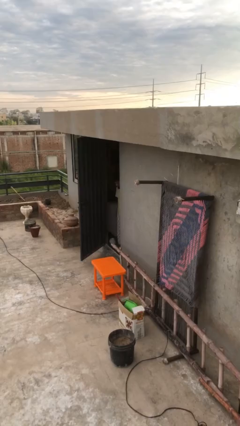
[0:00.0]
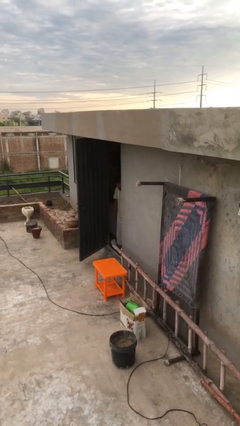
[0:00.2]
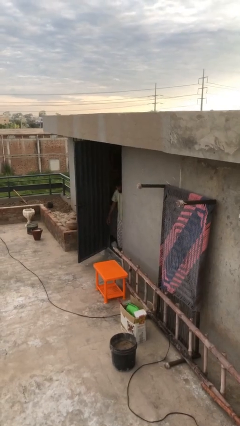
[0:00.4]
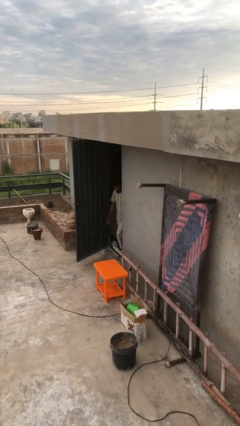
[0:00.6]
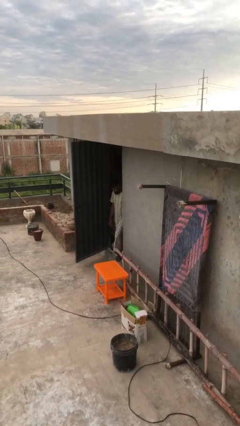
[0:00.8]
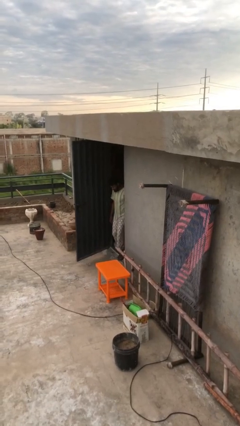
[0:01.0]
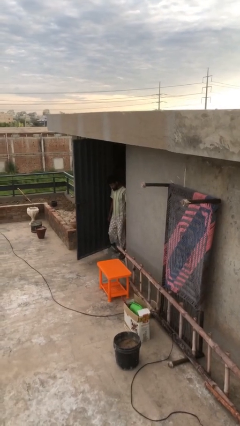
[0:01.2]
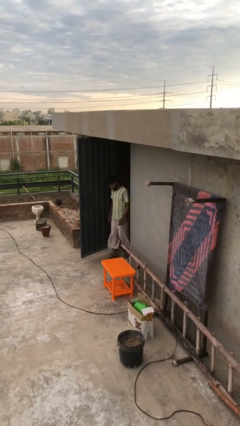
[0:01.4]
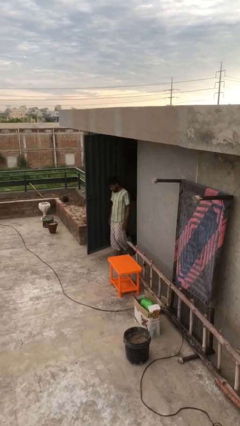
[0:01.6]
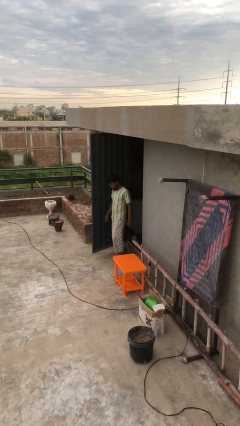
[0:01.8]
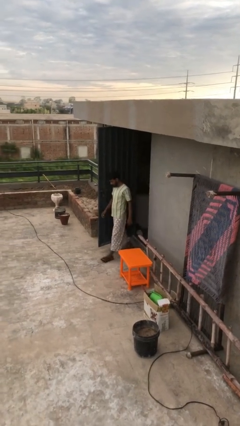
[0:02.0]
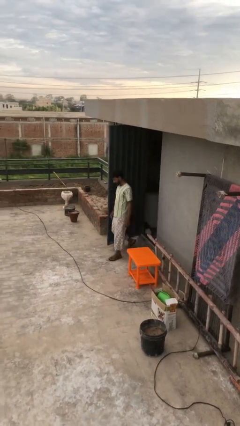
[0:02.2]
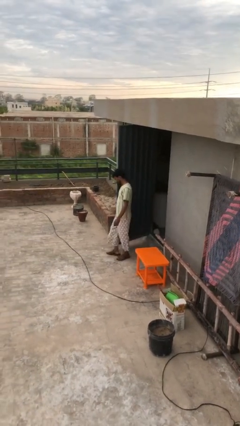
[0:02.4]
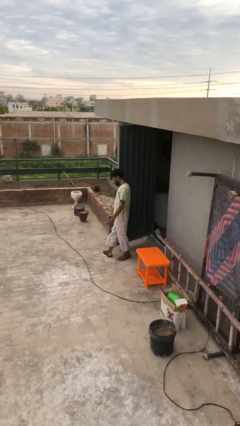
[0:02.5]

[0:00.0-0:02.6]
person enters scene through structure

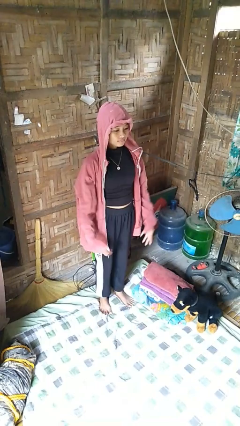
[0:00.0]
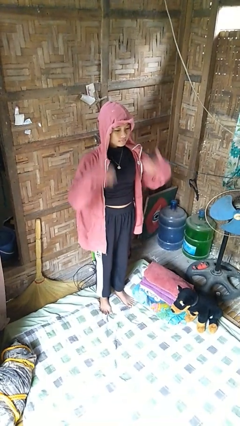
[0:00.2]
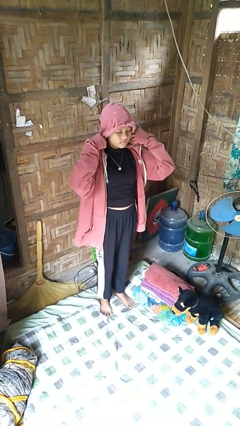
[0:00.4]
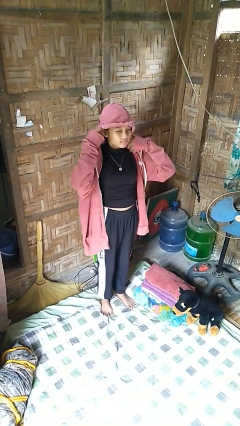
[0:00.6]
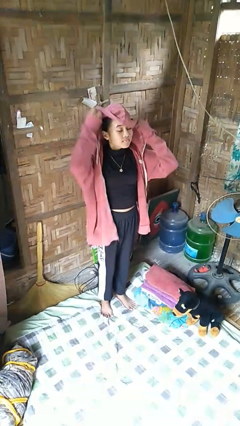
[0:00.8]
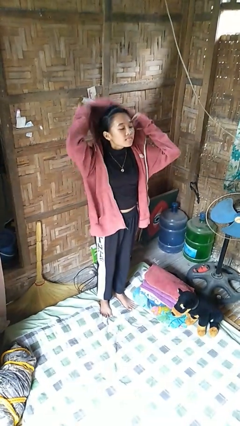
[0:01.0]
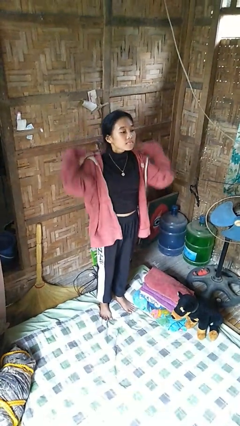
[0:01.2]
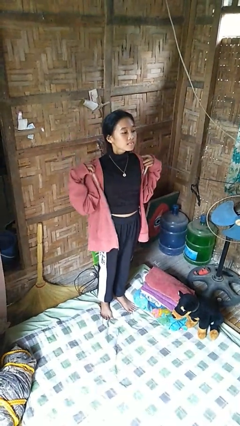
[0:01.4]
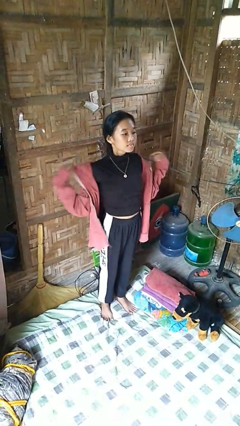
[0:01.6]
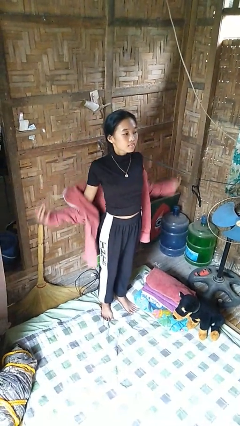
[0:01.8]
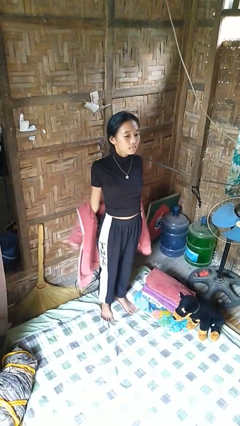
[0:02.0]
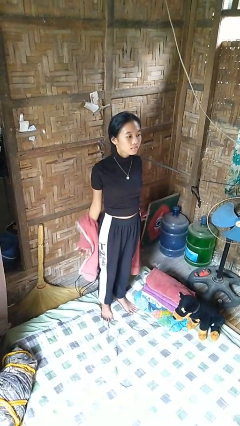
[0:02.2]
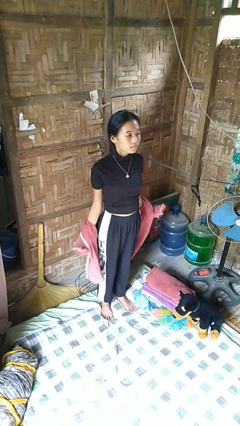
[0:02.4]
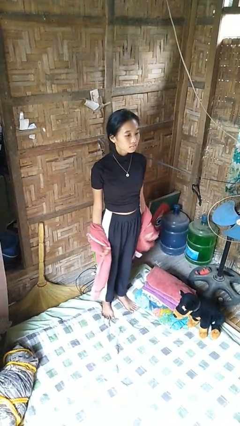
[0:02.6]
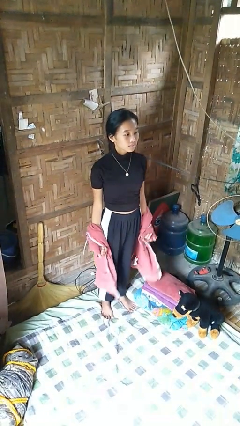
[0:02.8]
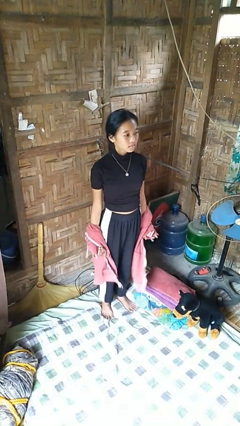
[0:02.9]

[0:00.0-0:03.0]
person takes off hoodie

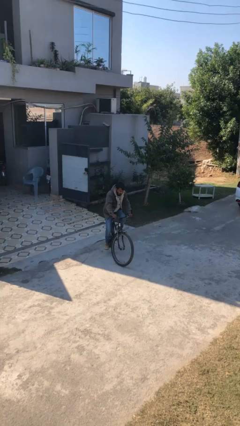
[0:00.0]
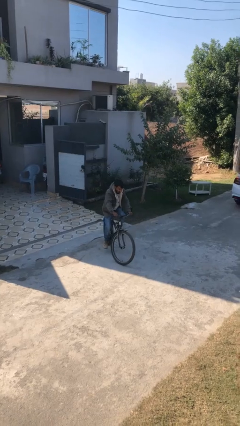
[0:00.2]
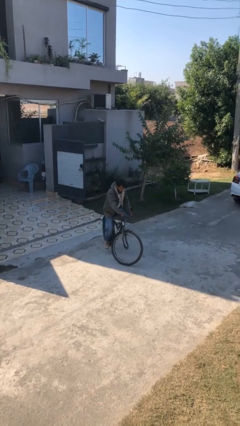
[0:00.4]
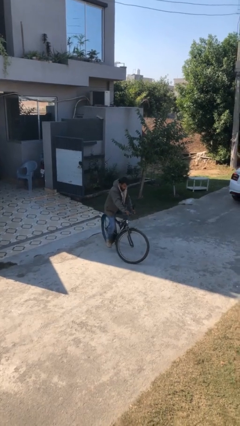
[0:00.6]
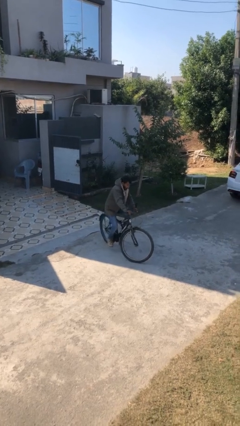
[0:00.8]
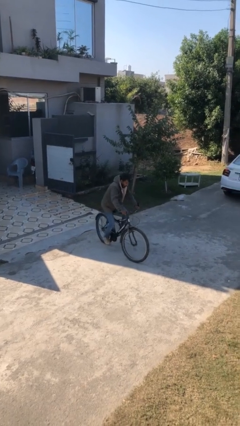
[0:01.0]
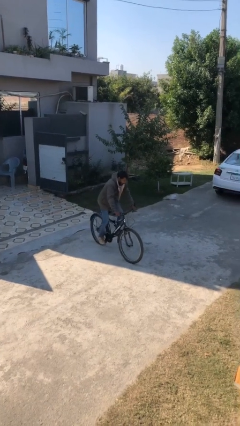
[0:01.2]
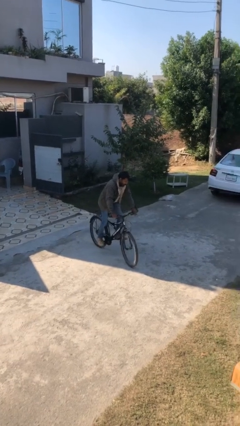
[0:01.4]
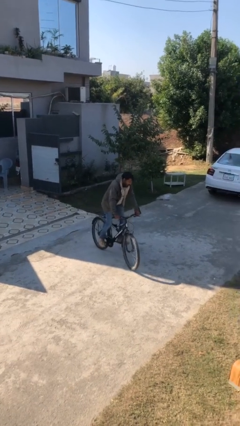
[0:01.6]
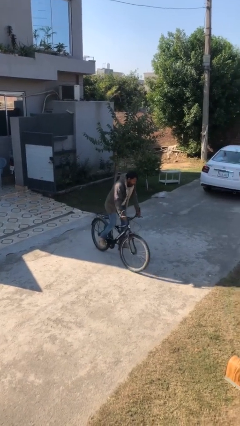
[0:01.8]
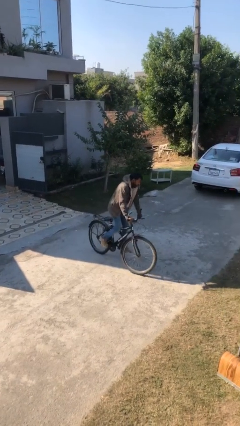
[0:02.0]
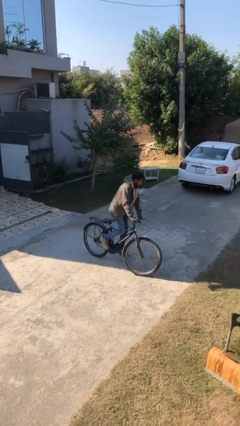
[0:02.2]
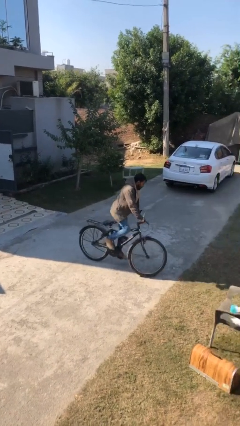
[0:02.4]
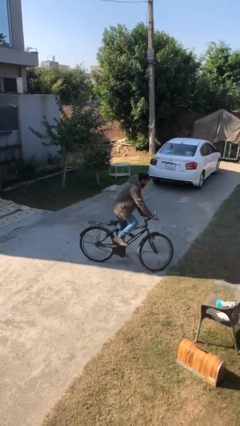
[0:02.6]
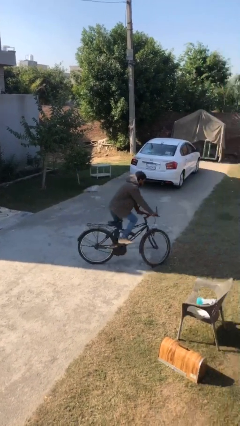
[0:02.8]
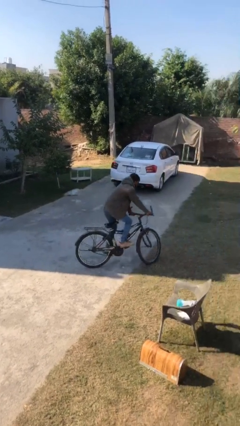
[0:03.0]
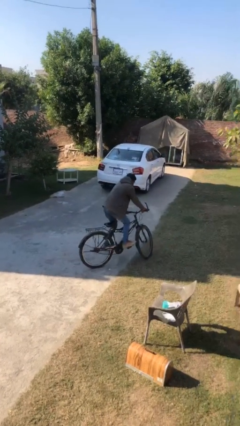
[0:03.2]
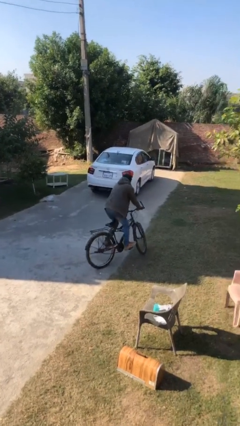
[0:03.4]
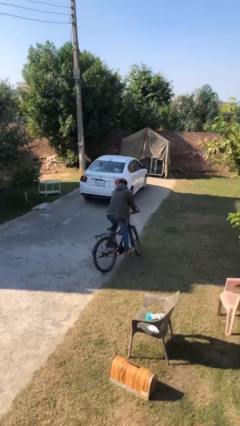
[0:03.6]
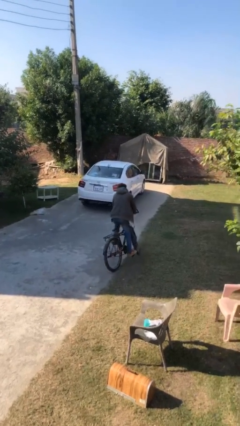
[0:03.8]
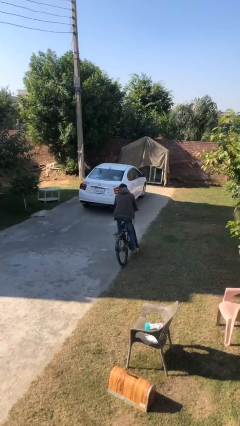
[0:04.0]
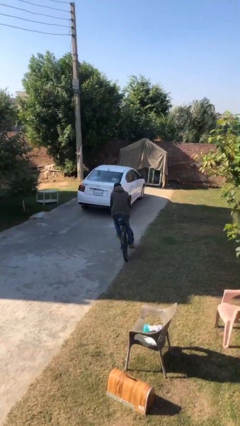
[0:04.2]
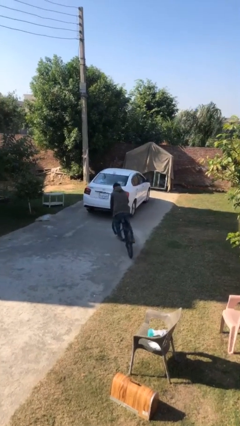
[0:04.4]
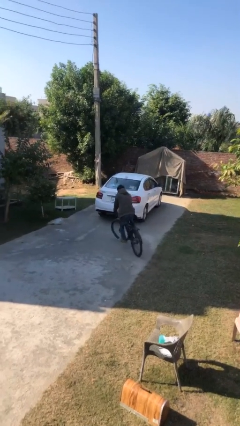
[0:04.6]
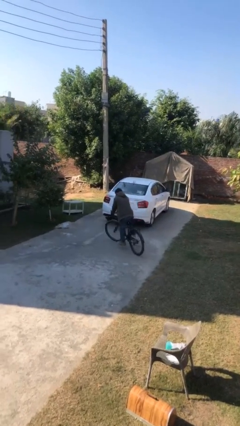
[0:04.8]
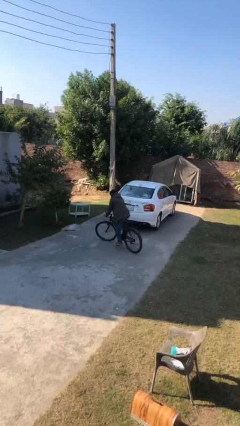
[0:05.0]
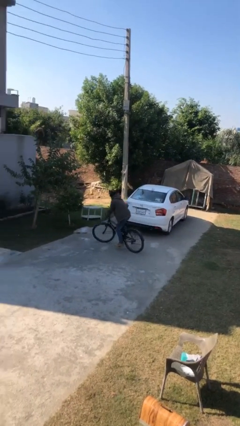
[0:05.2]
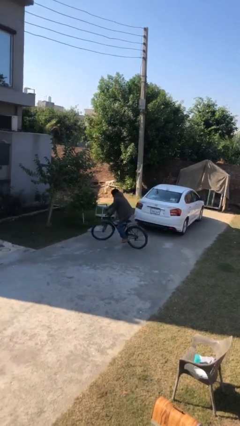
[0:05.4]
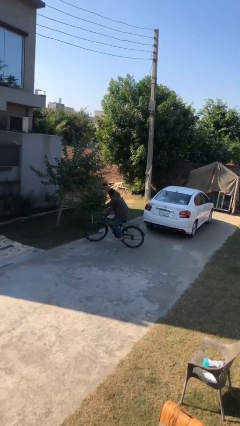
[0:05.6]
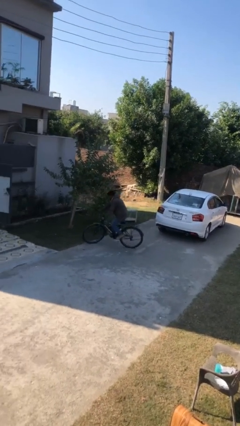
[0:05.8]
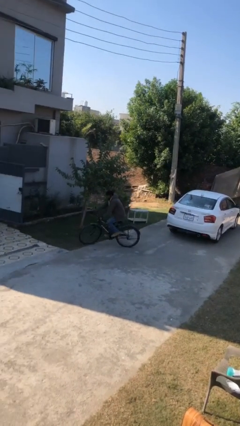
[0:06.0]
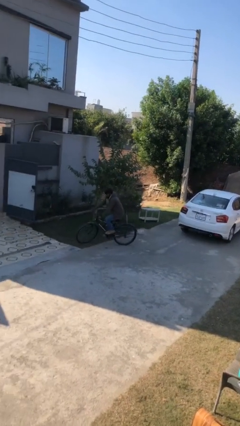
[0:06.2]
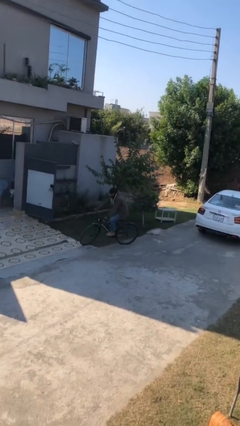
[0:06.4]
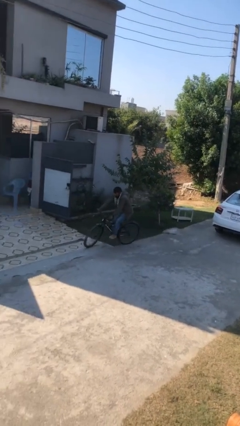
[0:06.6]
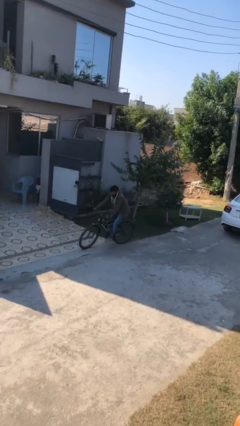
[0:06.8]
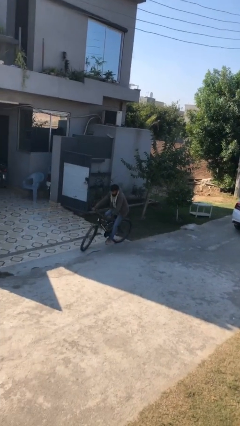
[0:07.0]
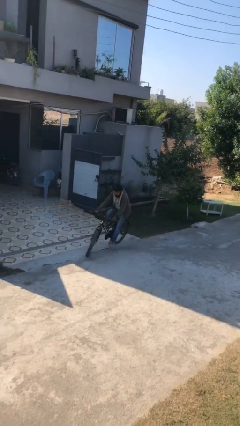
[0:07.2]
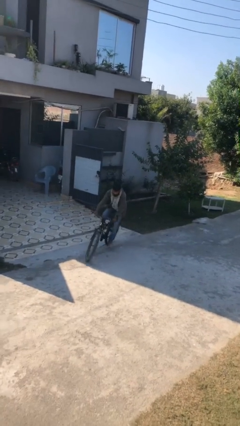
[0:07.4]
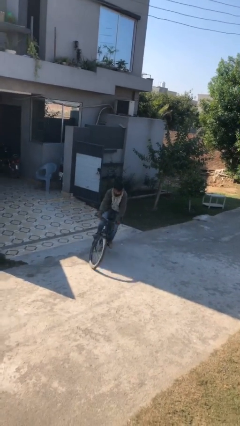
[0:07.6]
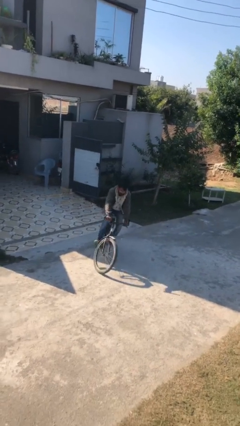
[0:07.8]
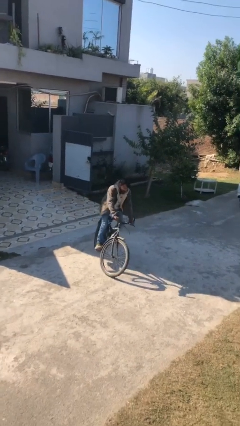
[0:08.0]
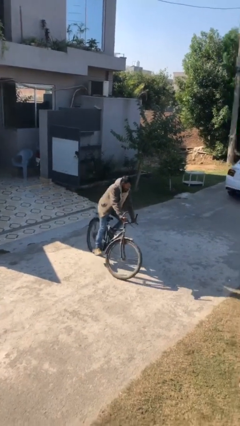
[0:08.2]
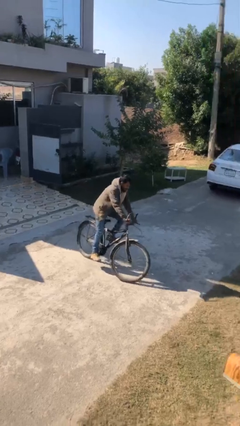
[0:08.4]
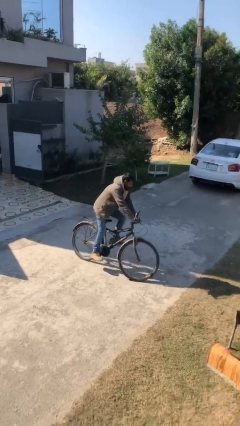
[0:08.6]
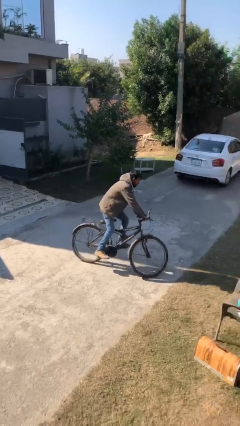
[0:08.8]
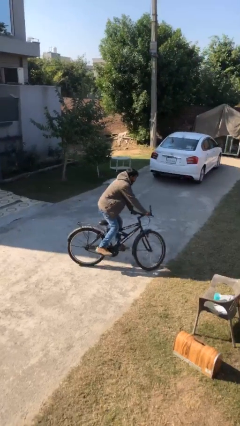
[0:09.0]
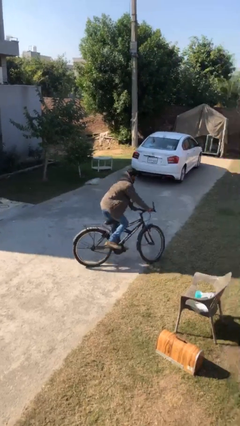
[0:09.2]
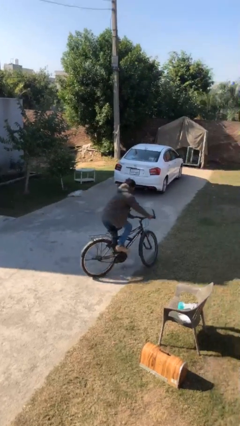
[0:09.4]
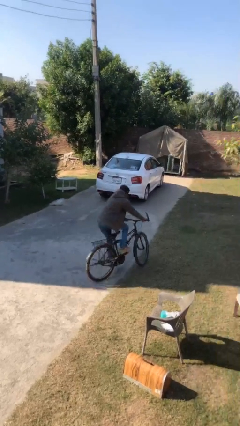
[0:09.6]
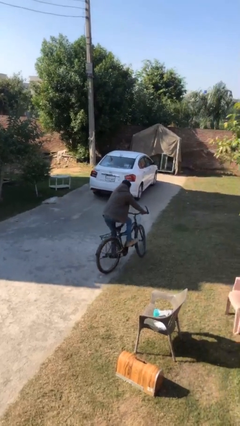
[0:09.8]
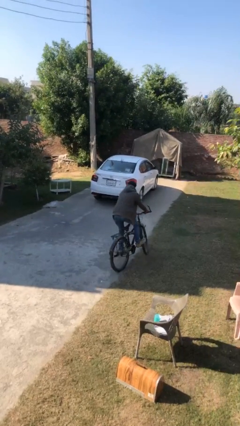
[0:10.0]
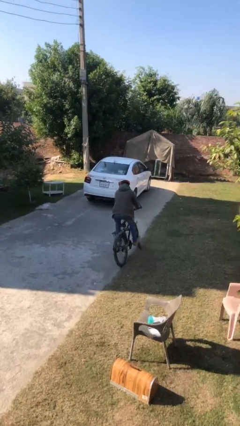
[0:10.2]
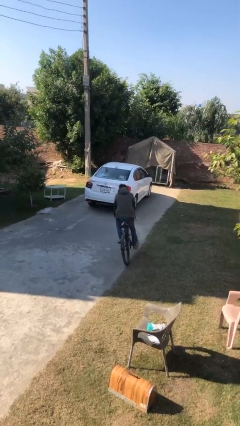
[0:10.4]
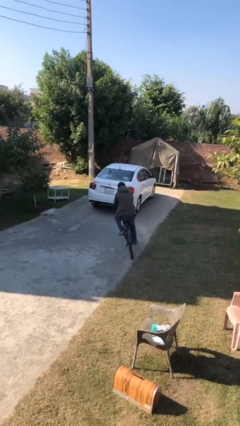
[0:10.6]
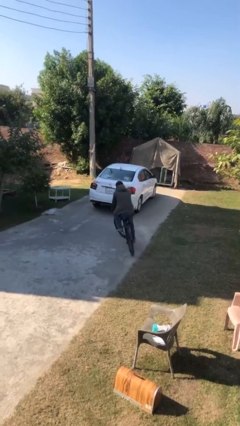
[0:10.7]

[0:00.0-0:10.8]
person rides bicycle

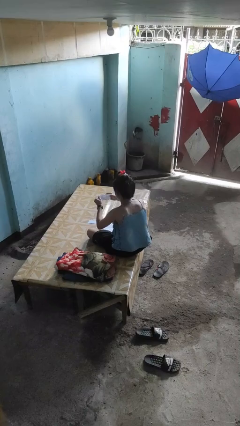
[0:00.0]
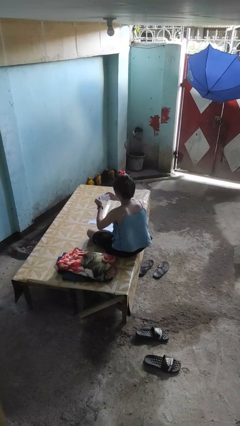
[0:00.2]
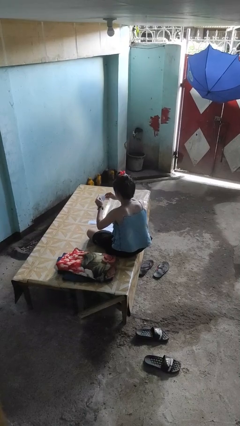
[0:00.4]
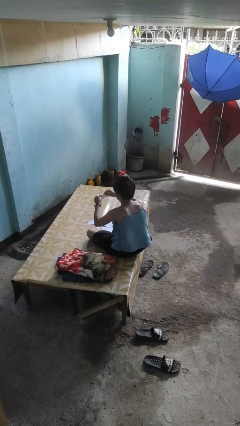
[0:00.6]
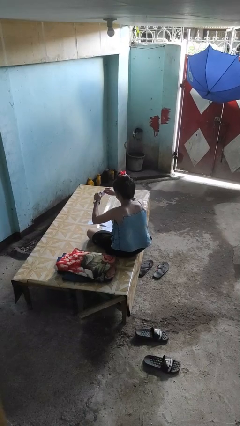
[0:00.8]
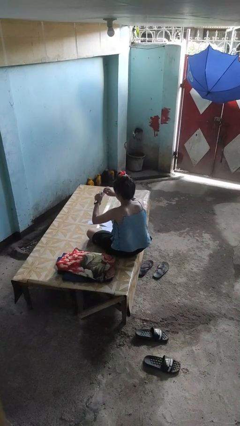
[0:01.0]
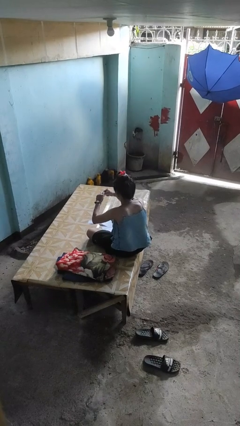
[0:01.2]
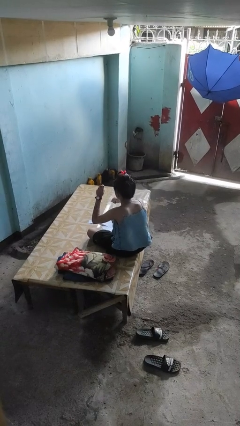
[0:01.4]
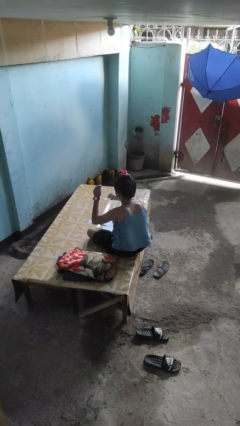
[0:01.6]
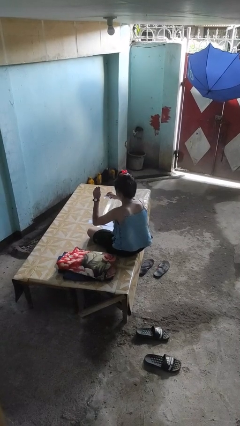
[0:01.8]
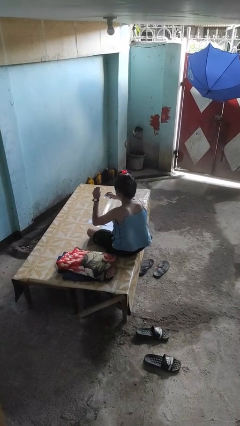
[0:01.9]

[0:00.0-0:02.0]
person tears paper
